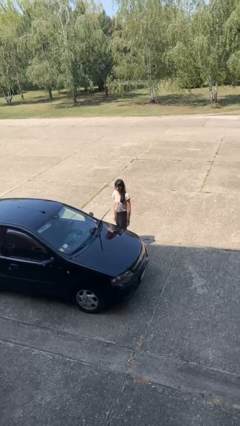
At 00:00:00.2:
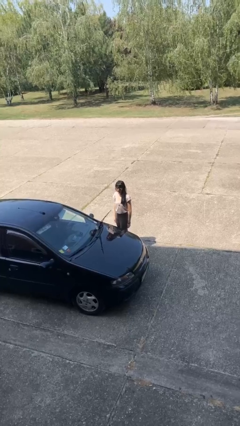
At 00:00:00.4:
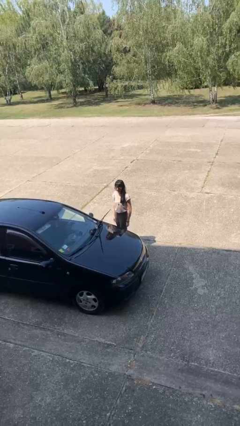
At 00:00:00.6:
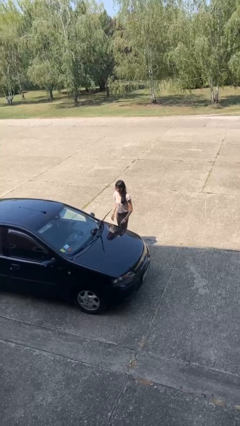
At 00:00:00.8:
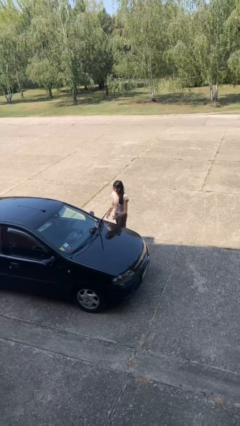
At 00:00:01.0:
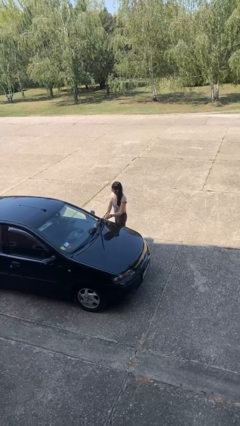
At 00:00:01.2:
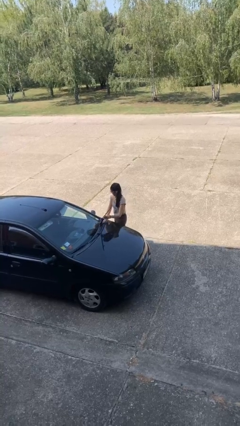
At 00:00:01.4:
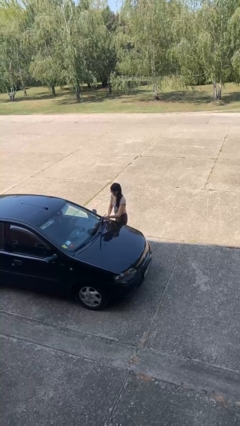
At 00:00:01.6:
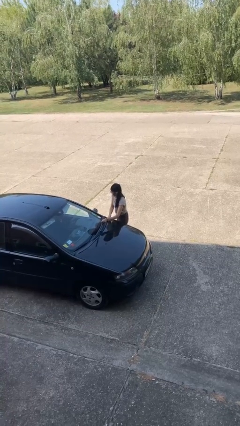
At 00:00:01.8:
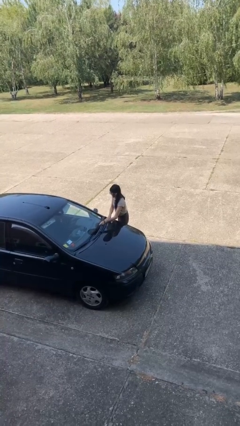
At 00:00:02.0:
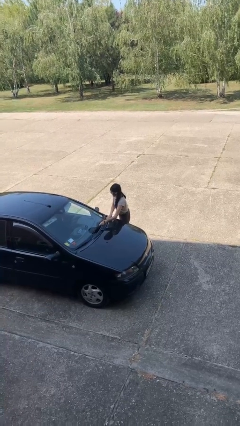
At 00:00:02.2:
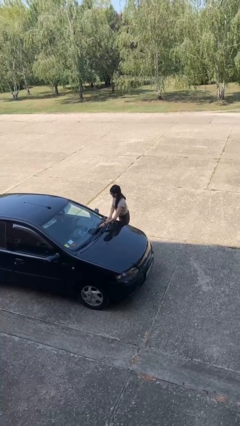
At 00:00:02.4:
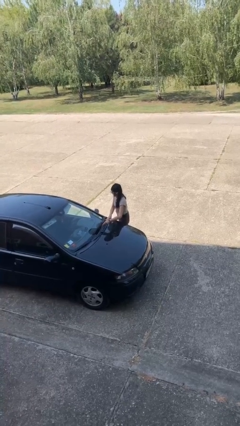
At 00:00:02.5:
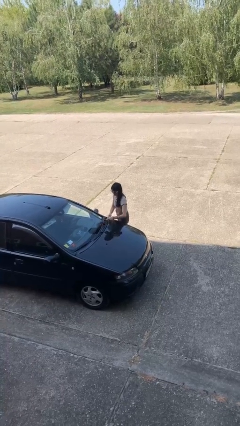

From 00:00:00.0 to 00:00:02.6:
person flips down car wipers

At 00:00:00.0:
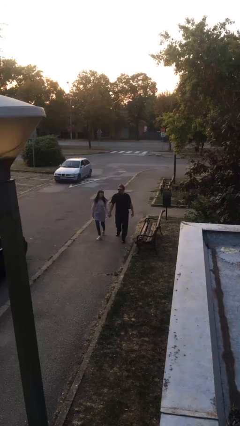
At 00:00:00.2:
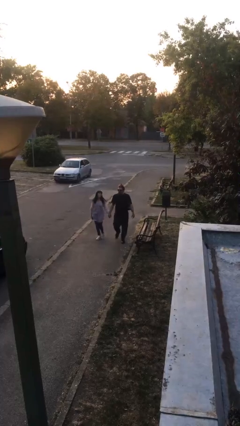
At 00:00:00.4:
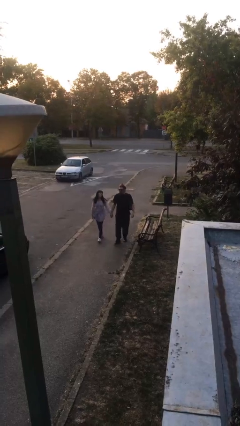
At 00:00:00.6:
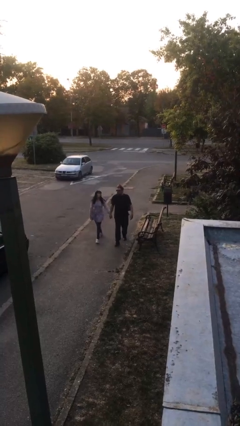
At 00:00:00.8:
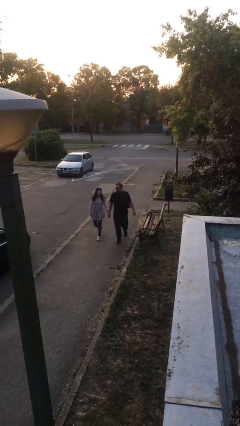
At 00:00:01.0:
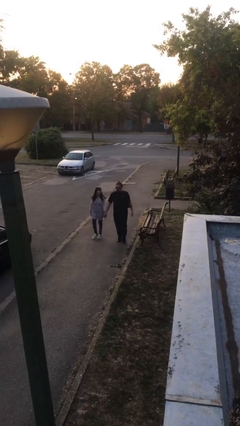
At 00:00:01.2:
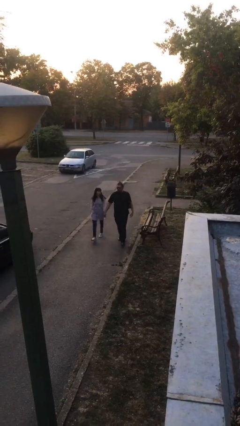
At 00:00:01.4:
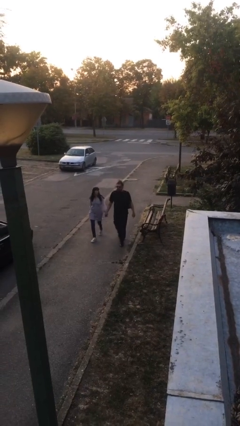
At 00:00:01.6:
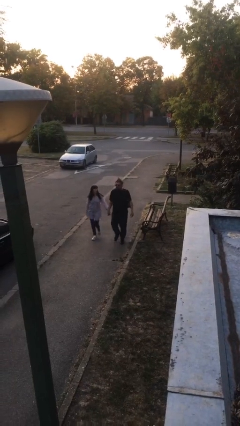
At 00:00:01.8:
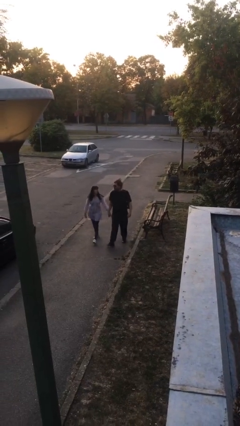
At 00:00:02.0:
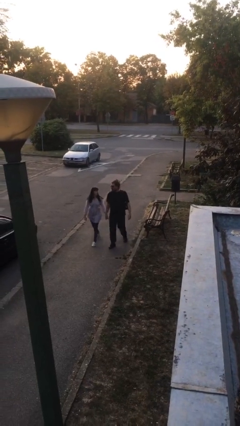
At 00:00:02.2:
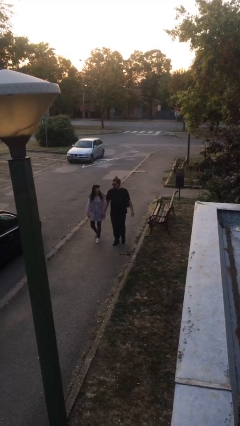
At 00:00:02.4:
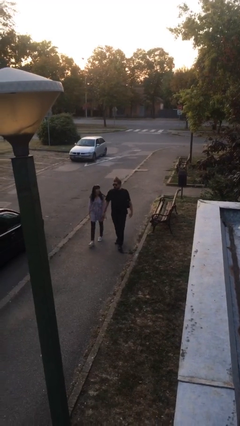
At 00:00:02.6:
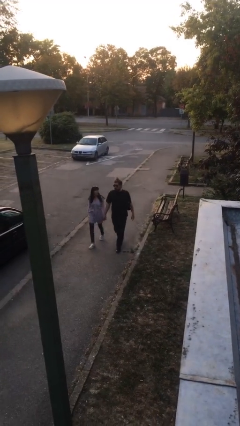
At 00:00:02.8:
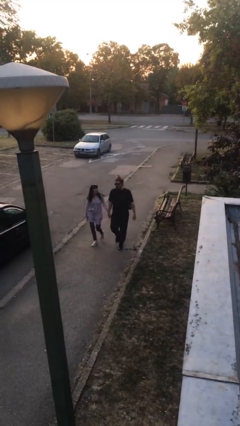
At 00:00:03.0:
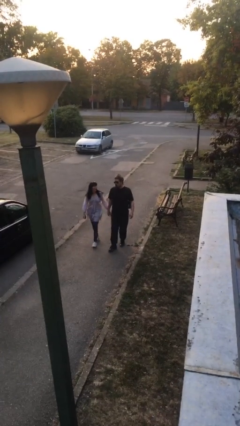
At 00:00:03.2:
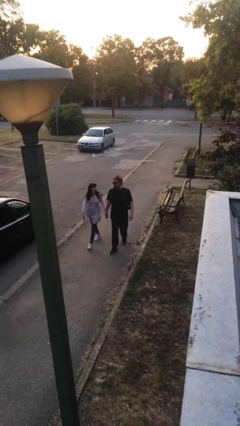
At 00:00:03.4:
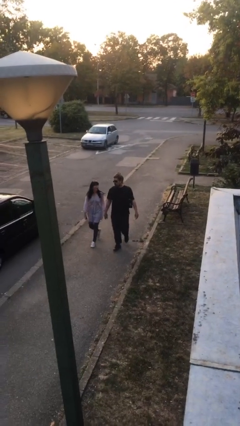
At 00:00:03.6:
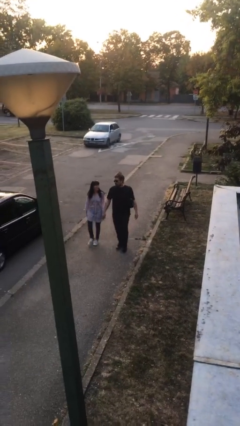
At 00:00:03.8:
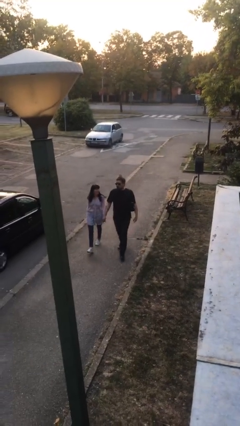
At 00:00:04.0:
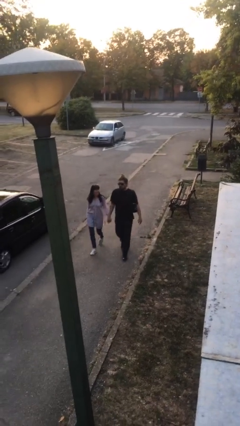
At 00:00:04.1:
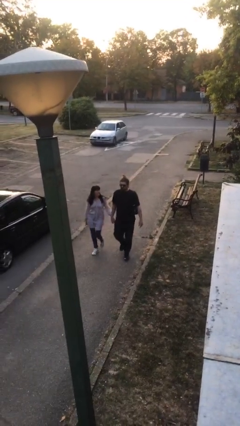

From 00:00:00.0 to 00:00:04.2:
person holds hand

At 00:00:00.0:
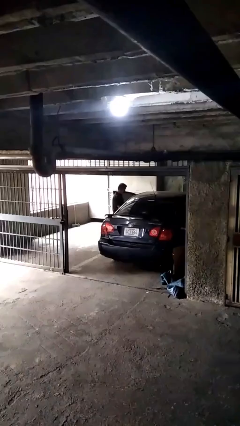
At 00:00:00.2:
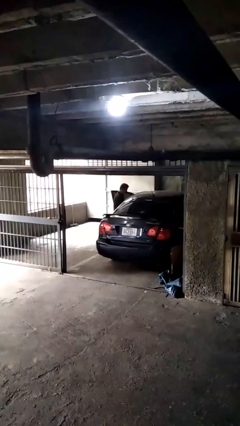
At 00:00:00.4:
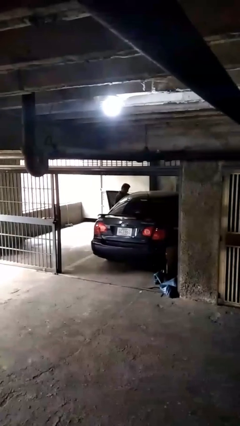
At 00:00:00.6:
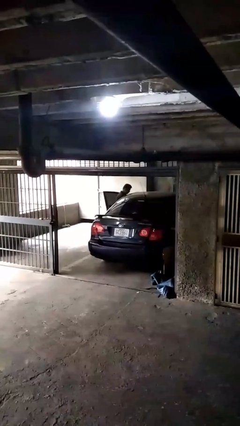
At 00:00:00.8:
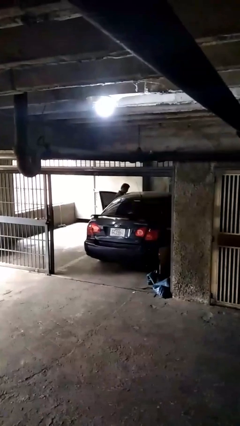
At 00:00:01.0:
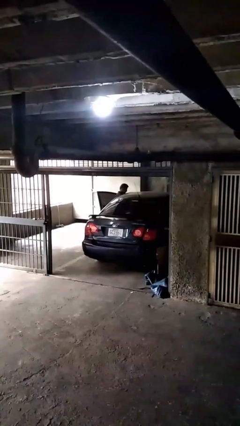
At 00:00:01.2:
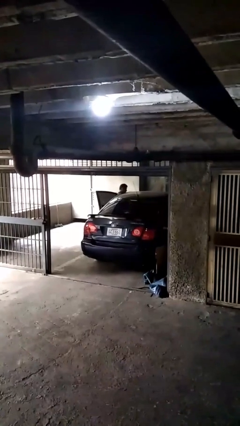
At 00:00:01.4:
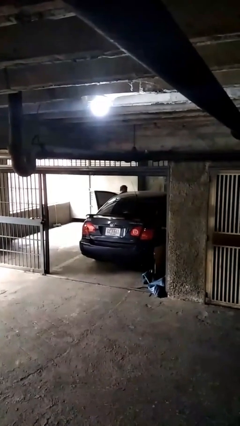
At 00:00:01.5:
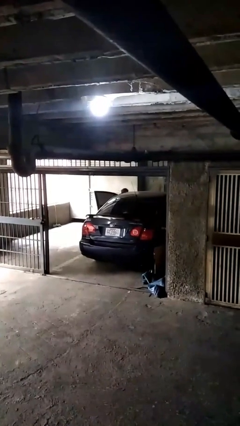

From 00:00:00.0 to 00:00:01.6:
person enters car

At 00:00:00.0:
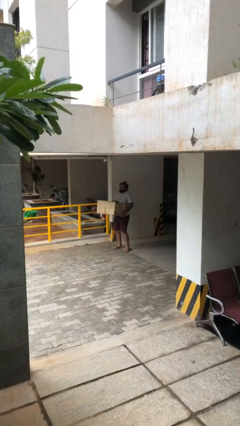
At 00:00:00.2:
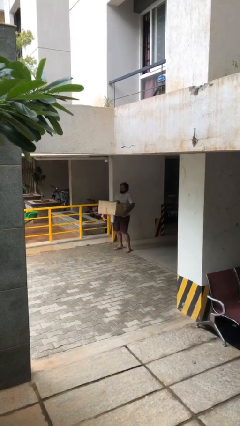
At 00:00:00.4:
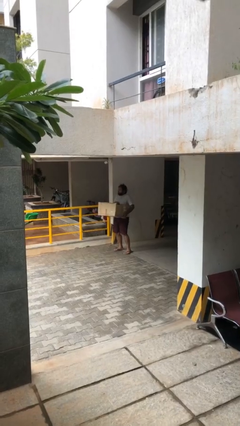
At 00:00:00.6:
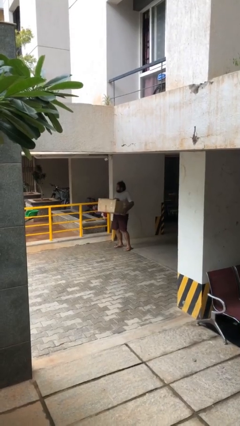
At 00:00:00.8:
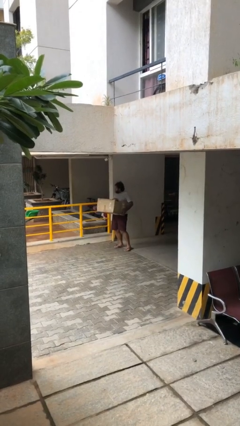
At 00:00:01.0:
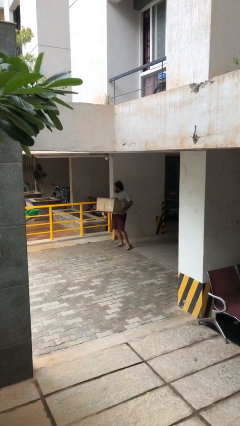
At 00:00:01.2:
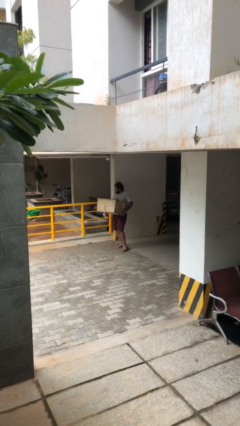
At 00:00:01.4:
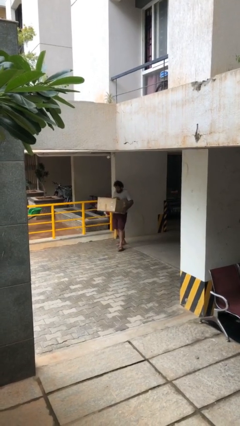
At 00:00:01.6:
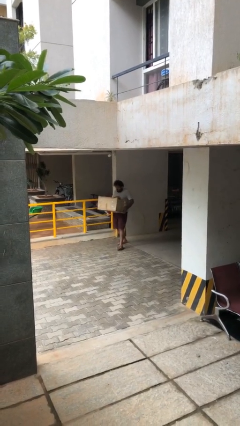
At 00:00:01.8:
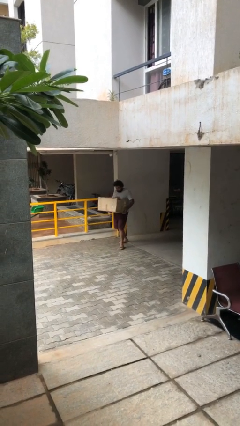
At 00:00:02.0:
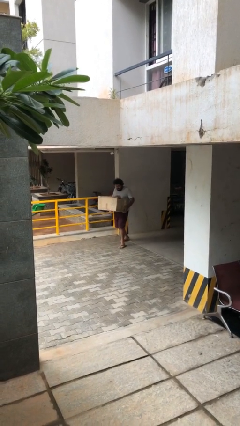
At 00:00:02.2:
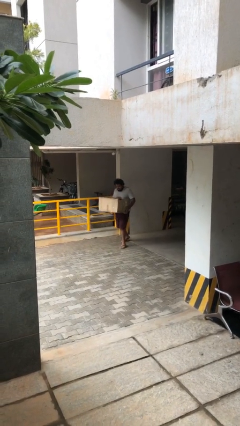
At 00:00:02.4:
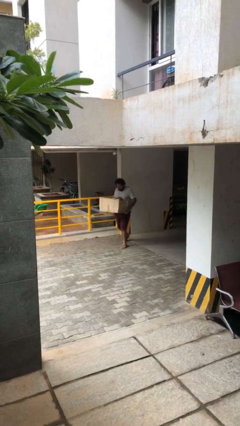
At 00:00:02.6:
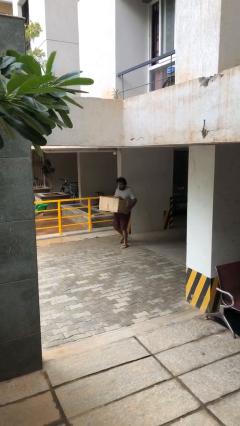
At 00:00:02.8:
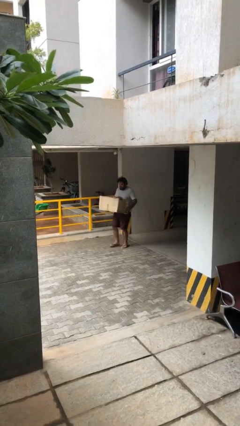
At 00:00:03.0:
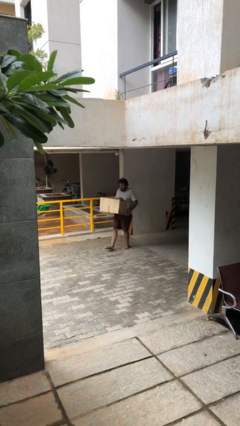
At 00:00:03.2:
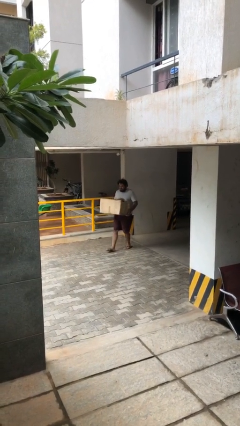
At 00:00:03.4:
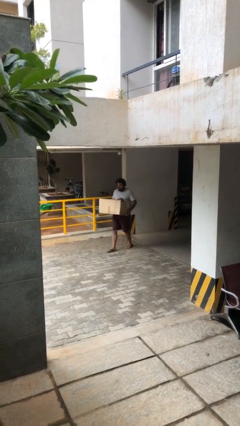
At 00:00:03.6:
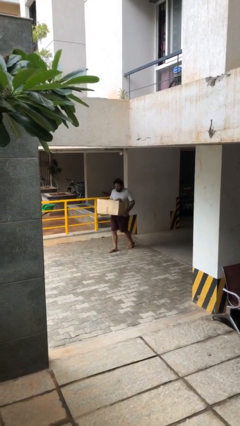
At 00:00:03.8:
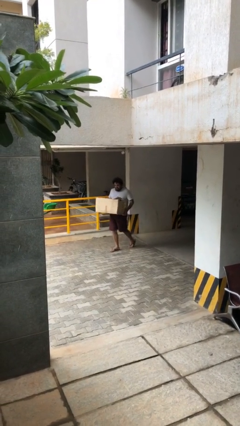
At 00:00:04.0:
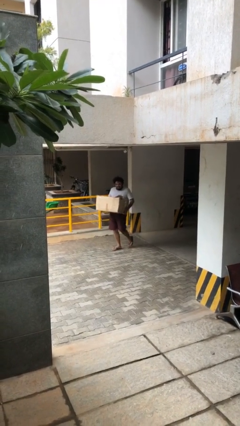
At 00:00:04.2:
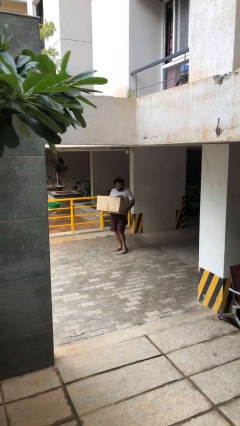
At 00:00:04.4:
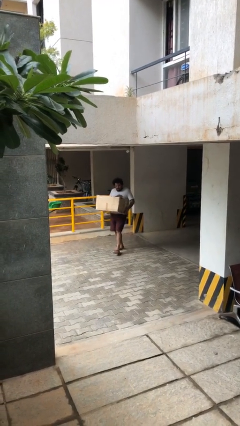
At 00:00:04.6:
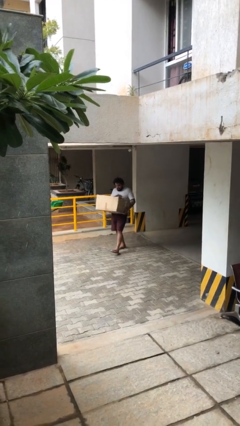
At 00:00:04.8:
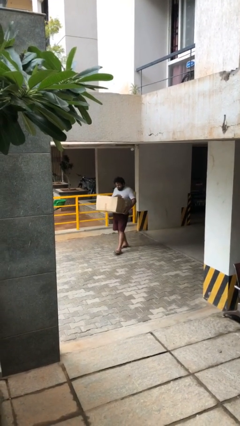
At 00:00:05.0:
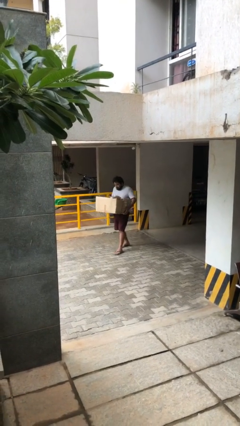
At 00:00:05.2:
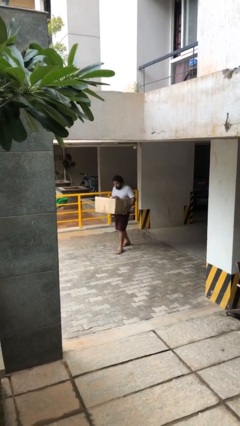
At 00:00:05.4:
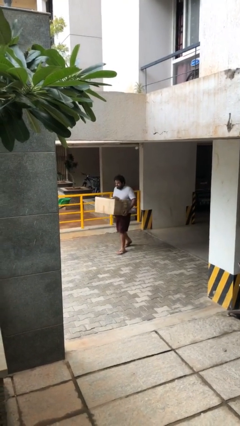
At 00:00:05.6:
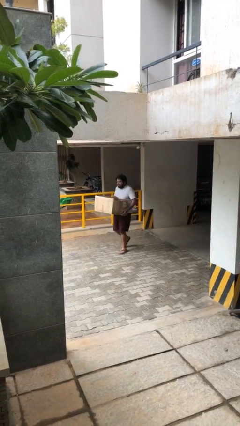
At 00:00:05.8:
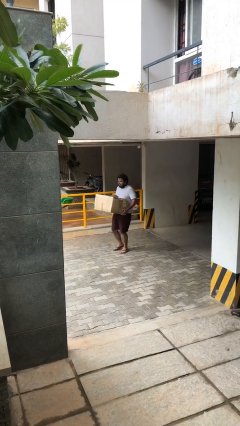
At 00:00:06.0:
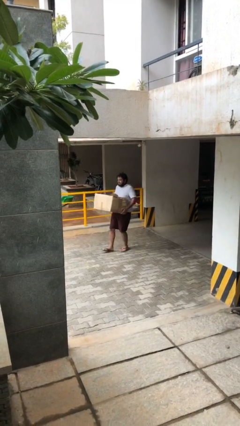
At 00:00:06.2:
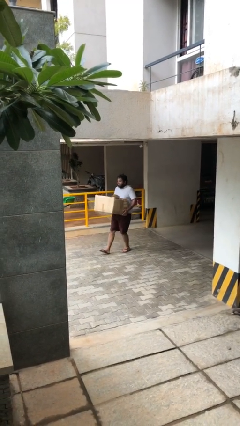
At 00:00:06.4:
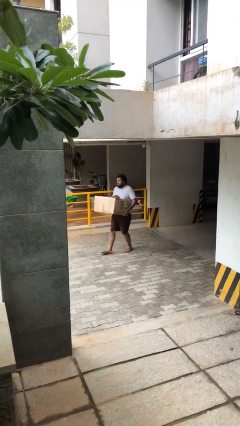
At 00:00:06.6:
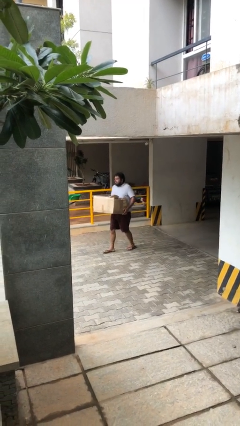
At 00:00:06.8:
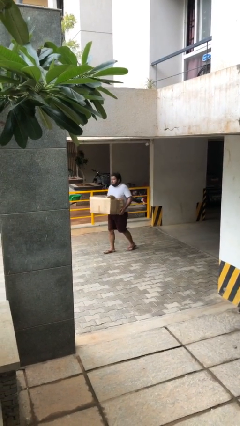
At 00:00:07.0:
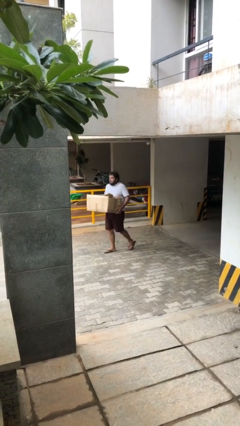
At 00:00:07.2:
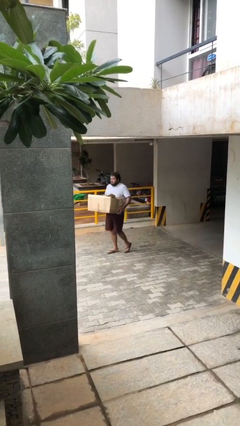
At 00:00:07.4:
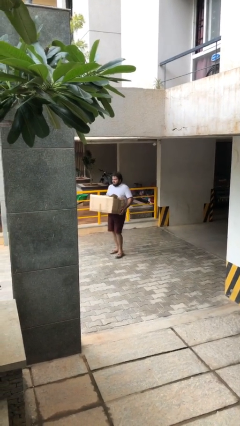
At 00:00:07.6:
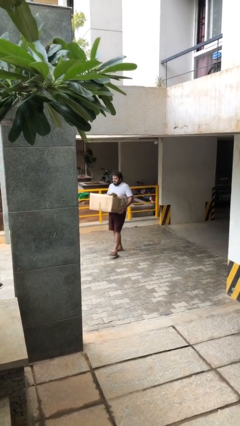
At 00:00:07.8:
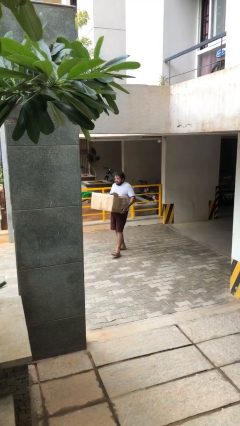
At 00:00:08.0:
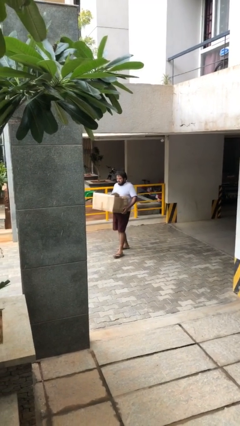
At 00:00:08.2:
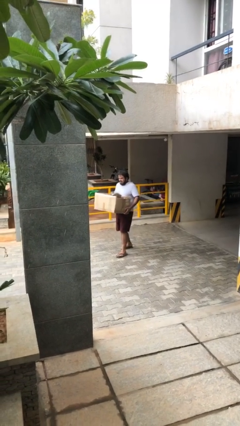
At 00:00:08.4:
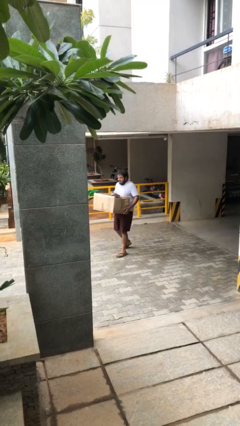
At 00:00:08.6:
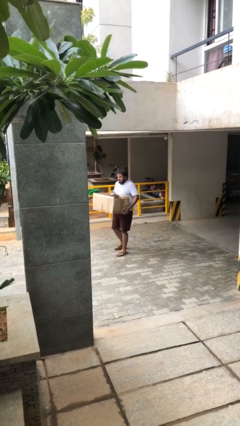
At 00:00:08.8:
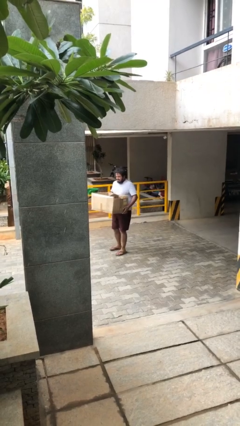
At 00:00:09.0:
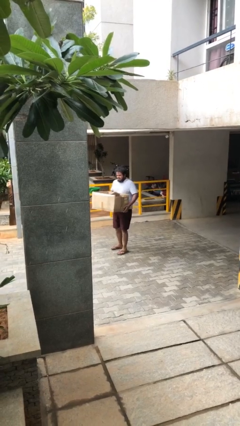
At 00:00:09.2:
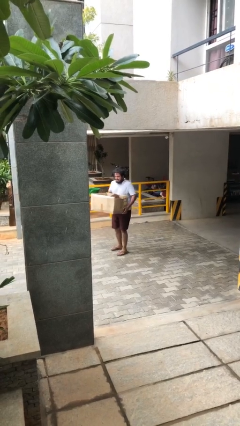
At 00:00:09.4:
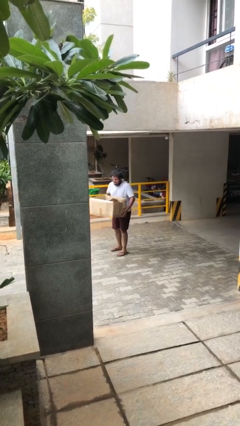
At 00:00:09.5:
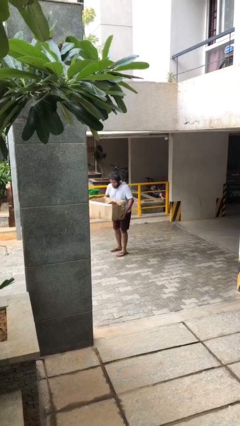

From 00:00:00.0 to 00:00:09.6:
person carries heavy object
